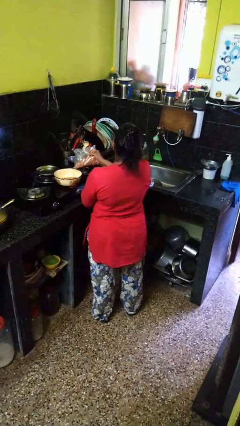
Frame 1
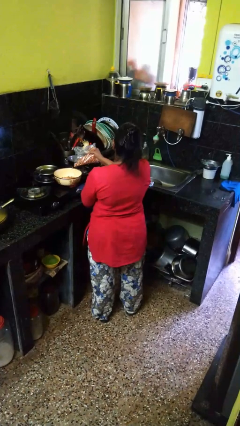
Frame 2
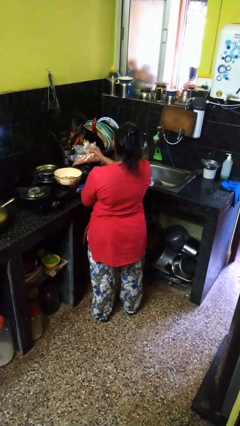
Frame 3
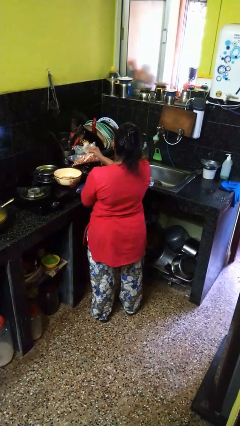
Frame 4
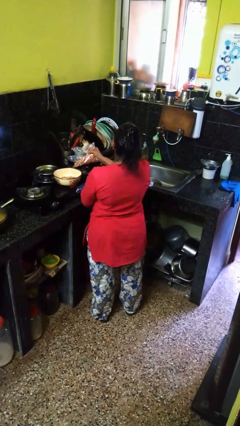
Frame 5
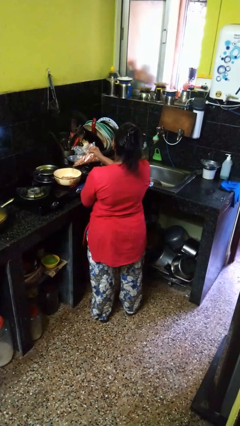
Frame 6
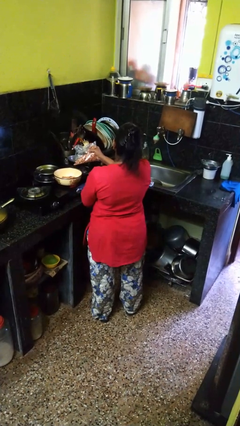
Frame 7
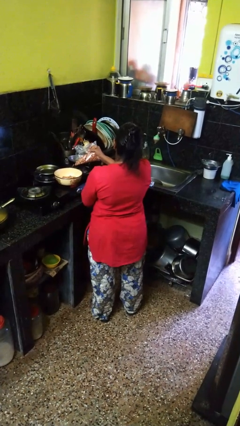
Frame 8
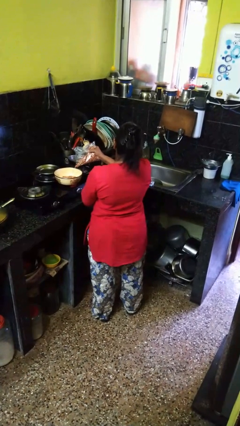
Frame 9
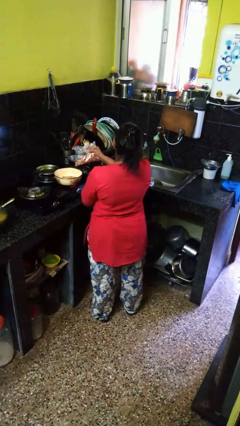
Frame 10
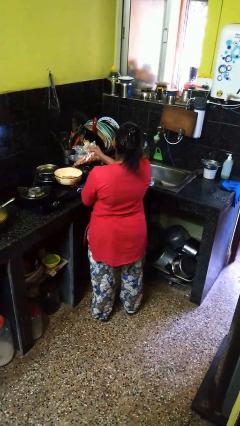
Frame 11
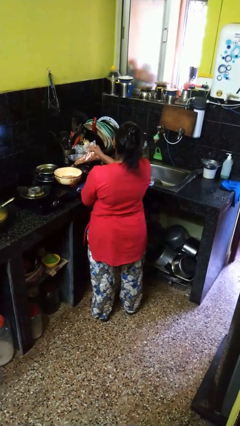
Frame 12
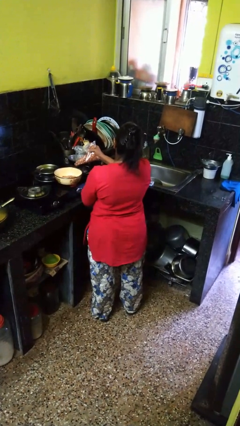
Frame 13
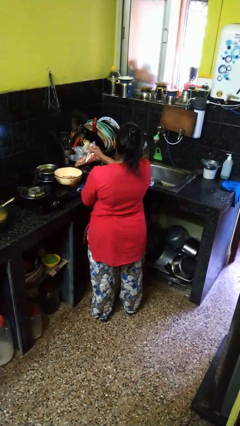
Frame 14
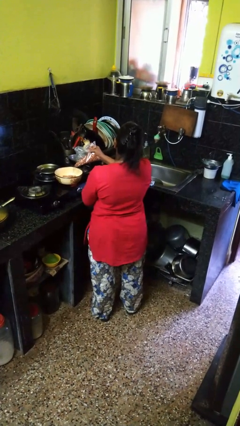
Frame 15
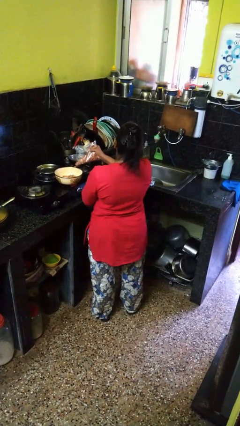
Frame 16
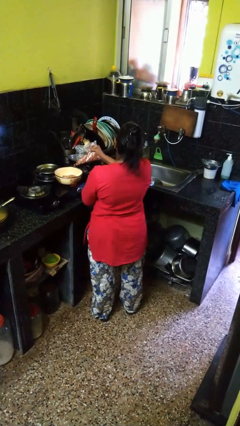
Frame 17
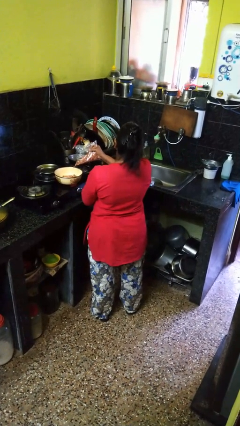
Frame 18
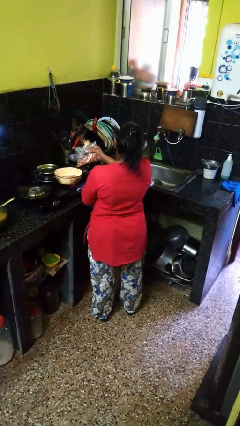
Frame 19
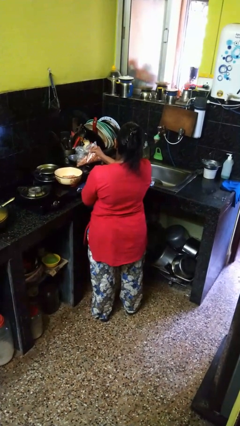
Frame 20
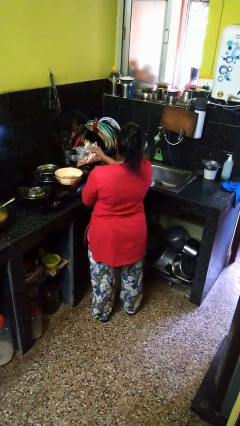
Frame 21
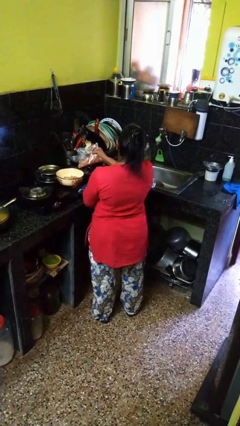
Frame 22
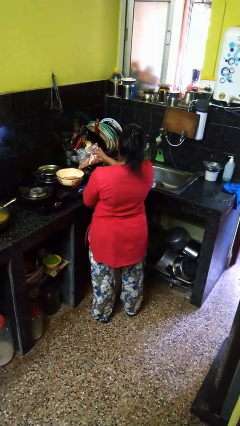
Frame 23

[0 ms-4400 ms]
person pours into bowl

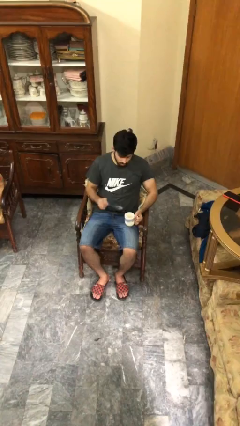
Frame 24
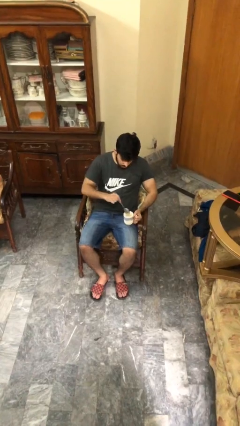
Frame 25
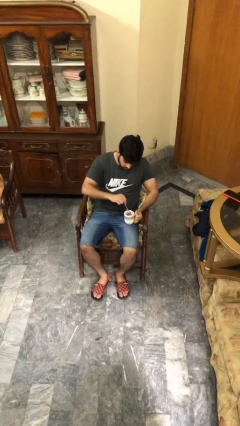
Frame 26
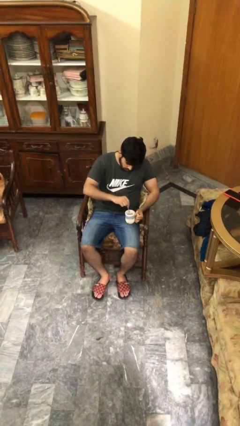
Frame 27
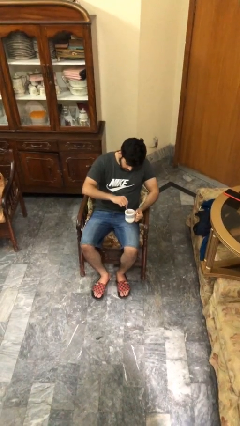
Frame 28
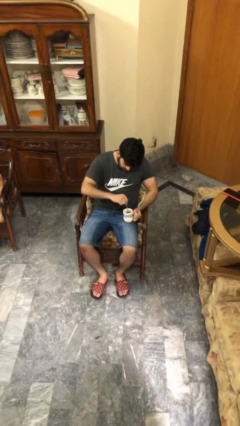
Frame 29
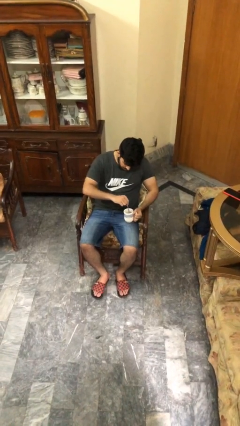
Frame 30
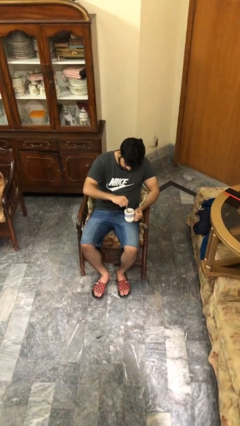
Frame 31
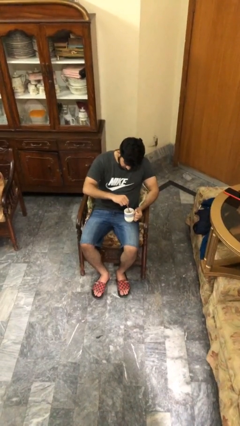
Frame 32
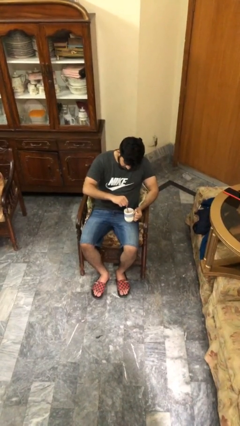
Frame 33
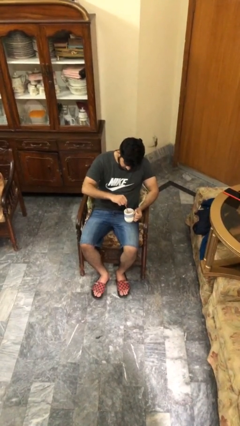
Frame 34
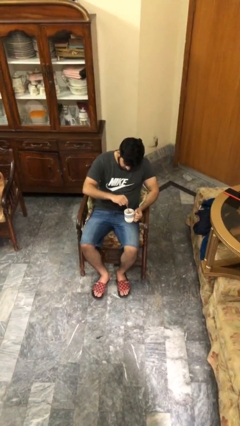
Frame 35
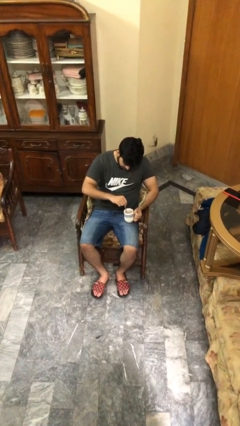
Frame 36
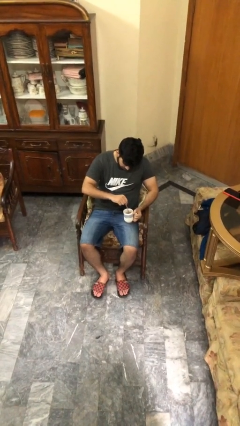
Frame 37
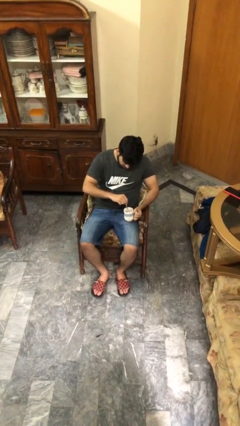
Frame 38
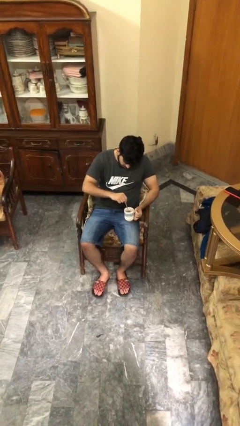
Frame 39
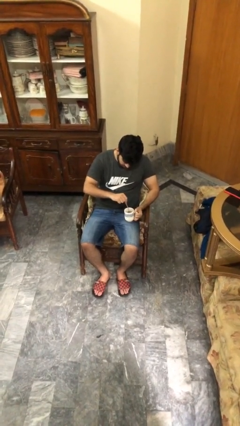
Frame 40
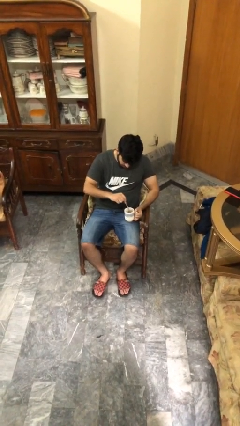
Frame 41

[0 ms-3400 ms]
person stirs mug

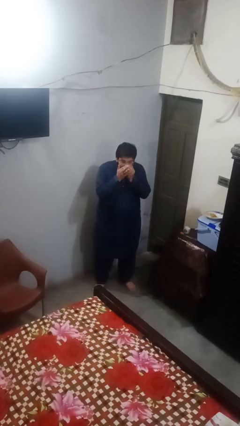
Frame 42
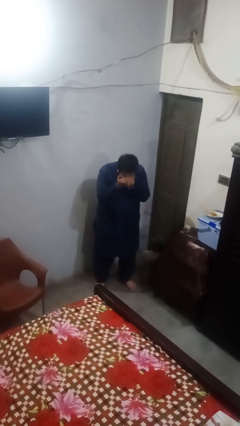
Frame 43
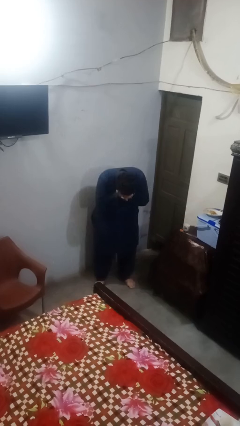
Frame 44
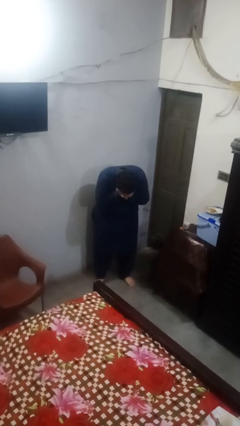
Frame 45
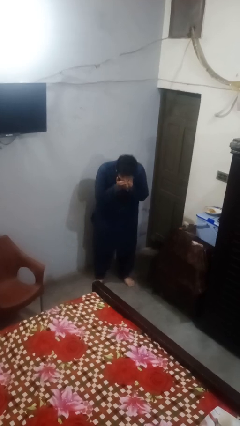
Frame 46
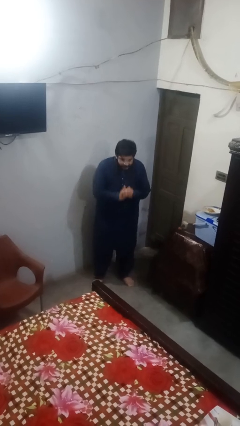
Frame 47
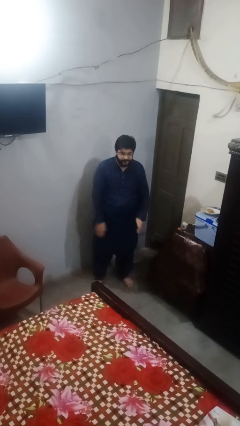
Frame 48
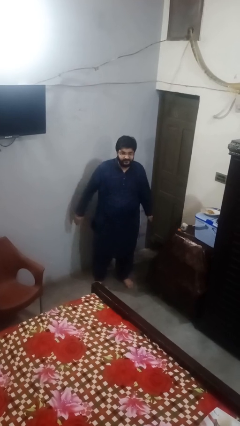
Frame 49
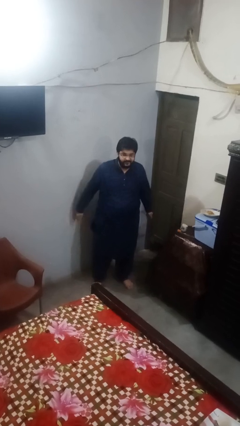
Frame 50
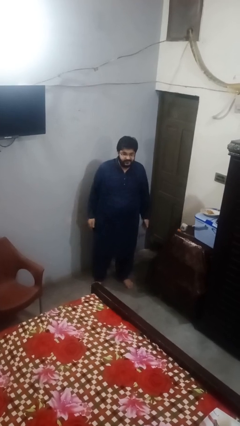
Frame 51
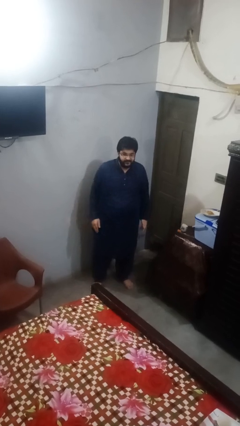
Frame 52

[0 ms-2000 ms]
person sneezes into hand

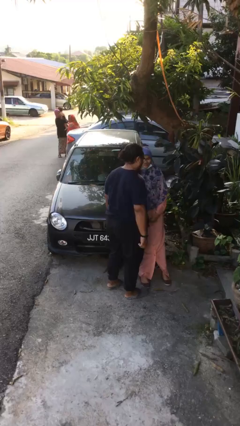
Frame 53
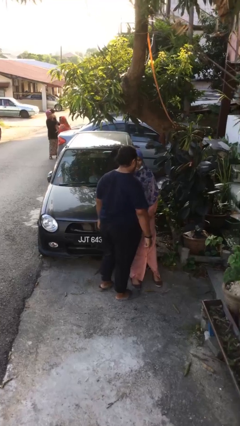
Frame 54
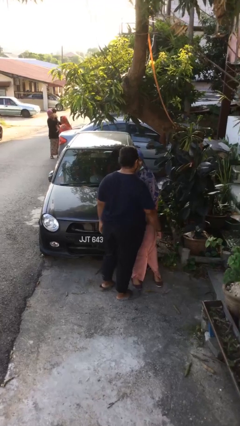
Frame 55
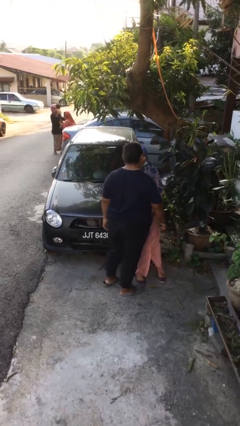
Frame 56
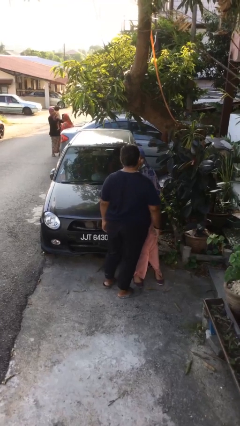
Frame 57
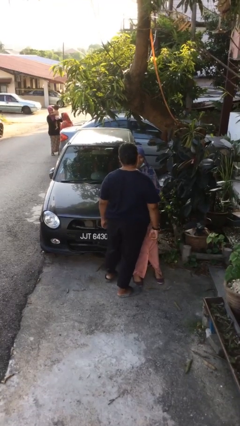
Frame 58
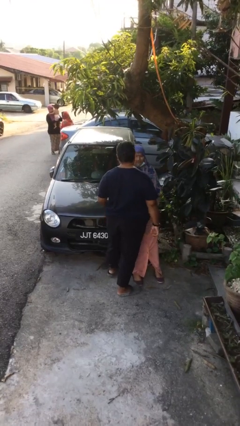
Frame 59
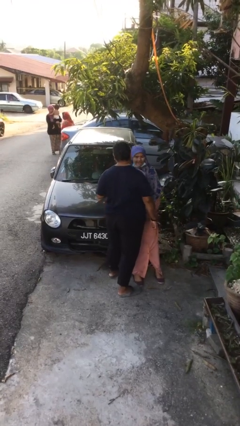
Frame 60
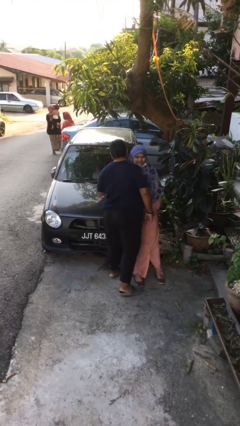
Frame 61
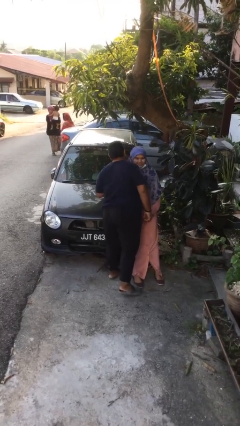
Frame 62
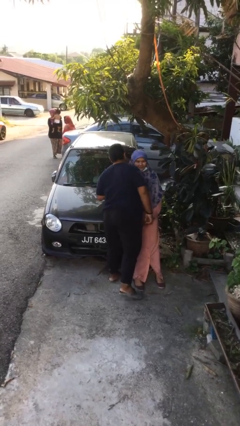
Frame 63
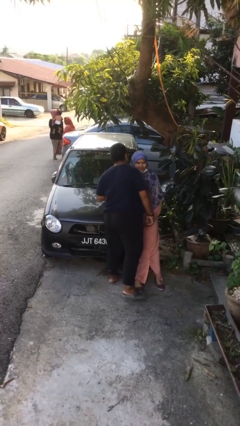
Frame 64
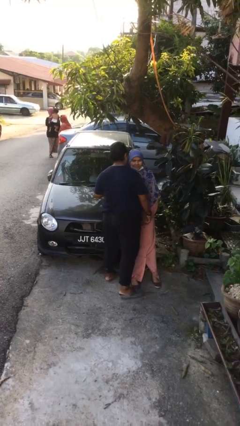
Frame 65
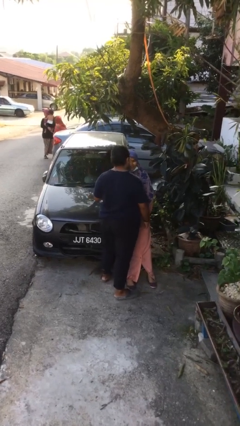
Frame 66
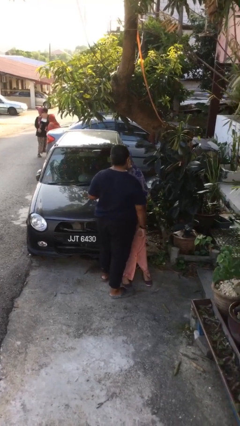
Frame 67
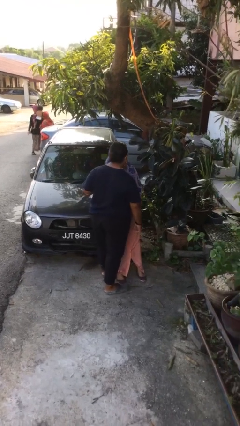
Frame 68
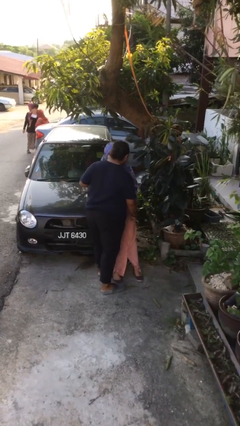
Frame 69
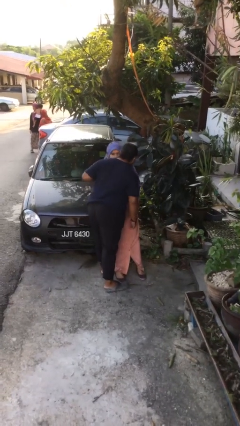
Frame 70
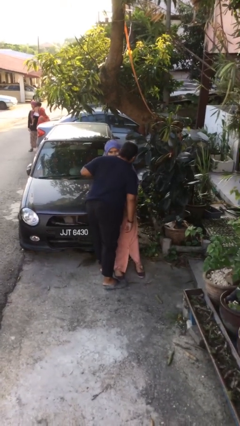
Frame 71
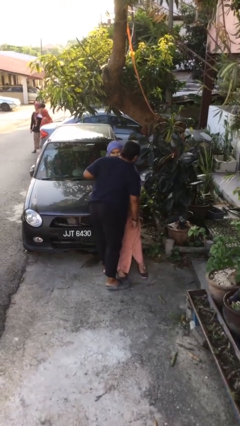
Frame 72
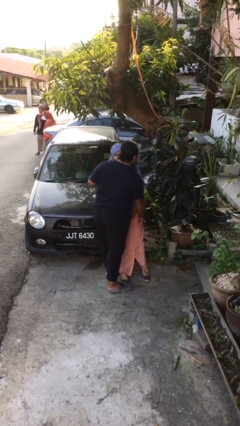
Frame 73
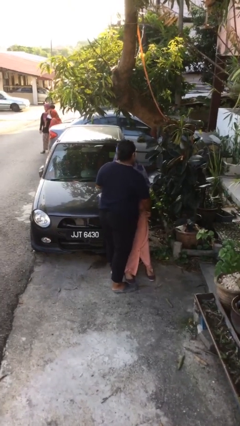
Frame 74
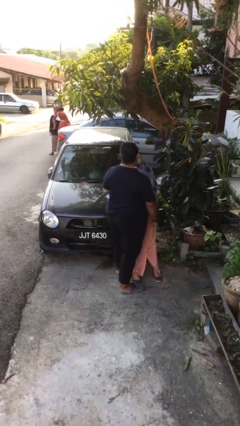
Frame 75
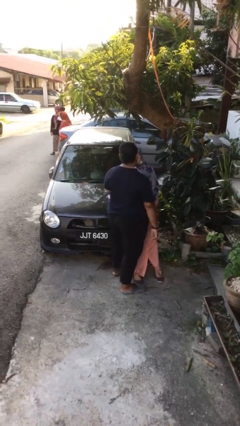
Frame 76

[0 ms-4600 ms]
person kisses cheek of person

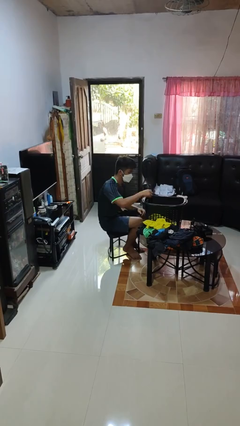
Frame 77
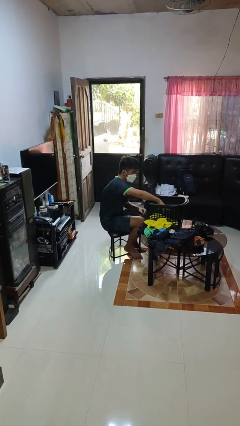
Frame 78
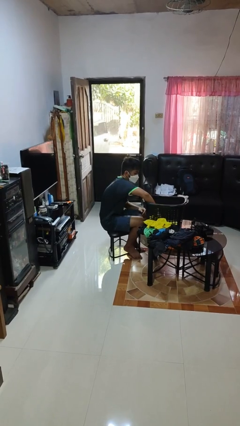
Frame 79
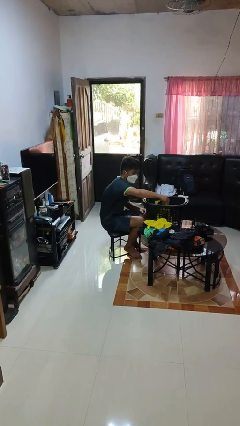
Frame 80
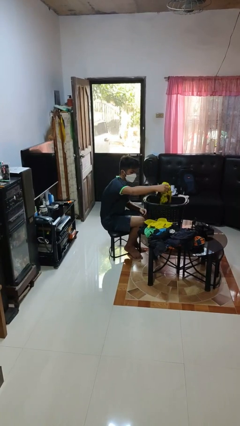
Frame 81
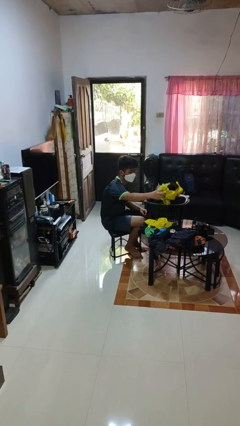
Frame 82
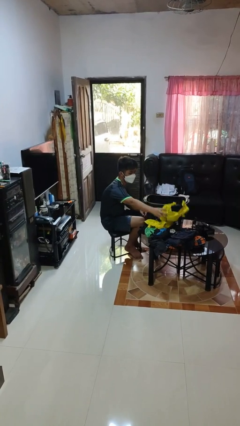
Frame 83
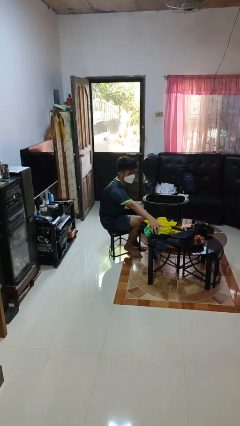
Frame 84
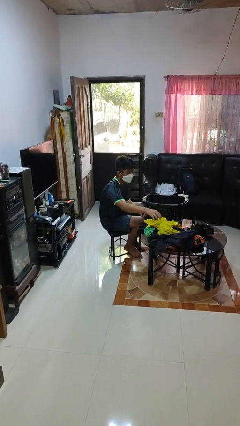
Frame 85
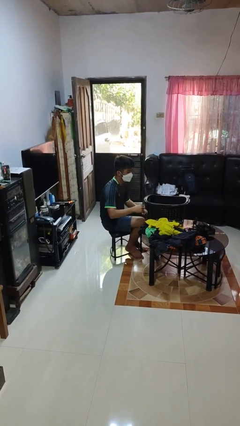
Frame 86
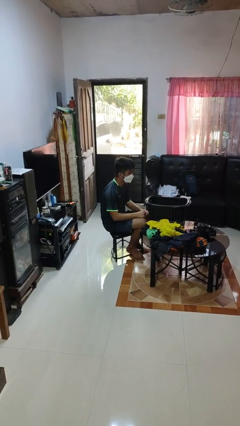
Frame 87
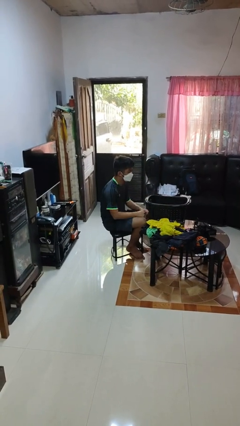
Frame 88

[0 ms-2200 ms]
person takes object from basket

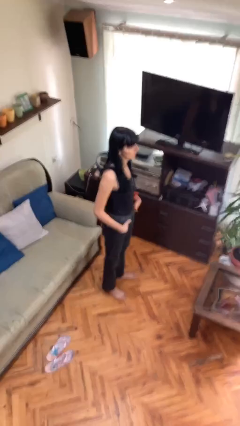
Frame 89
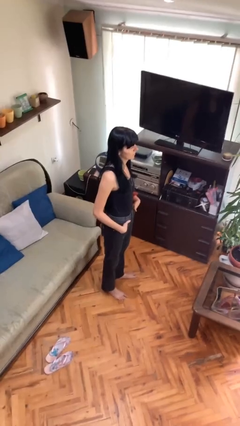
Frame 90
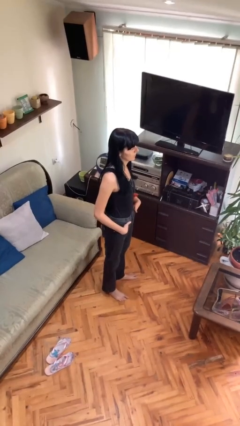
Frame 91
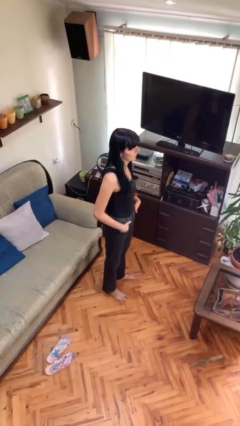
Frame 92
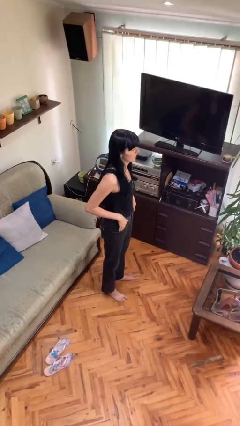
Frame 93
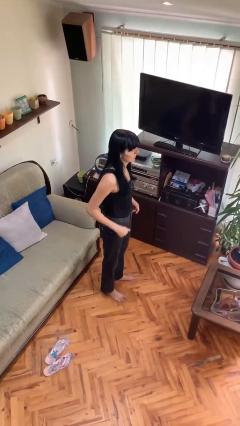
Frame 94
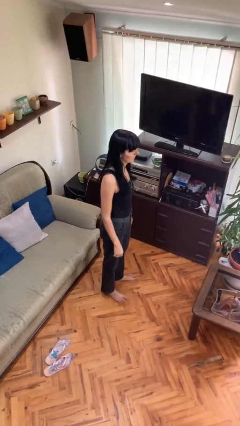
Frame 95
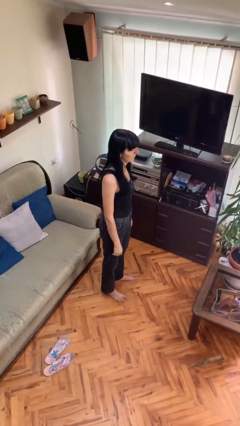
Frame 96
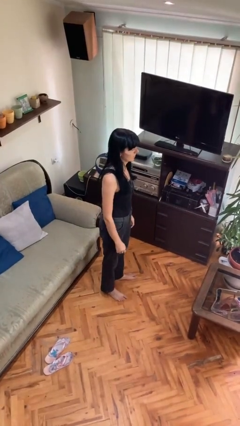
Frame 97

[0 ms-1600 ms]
person puts hands in back pockets
